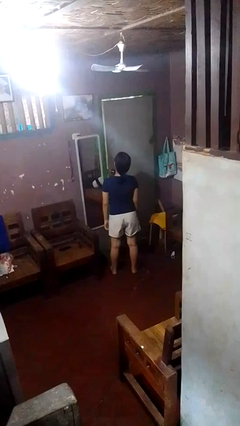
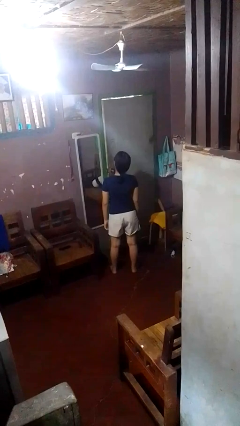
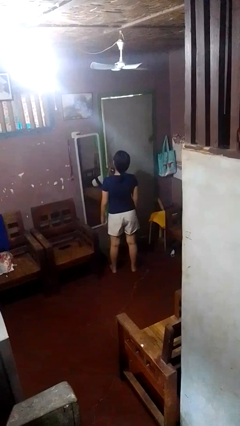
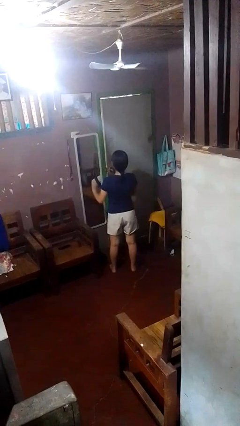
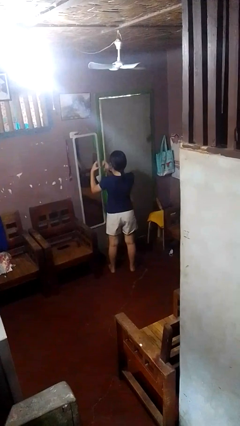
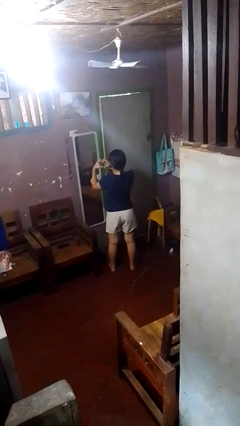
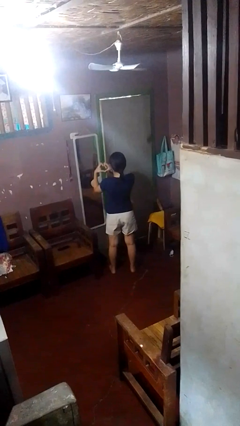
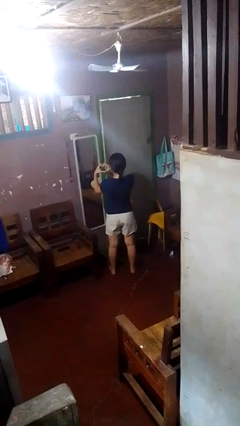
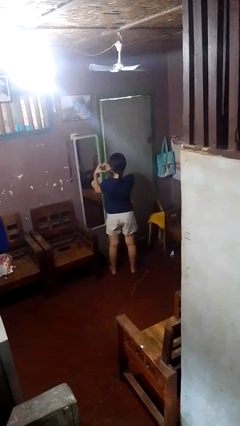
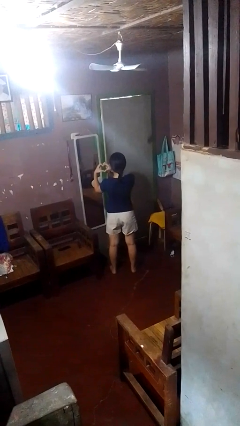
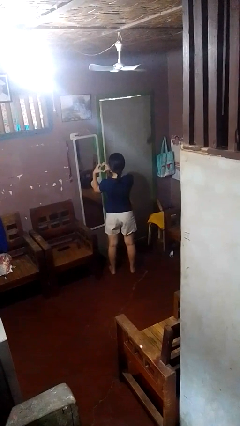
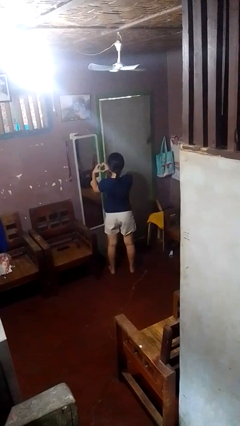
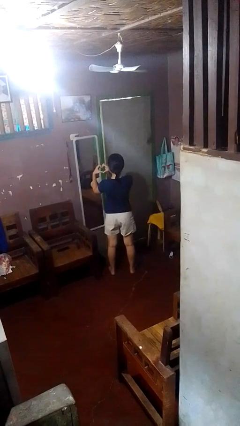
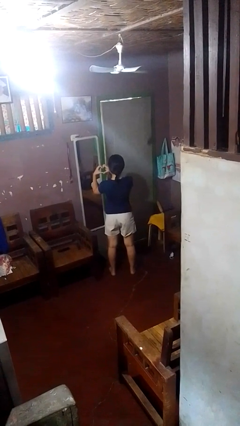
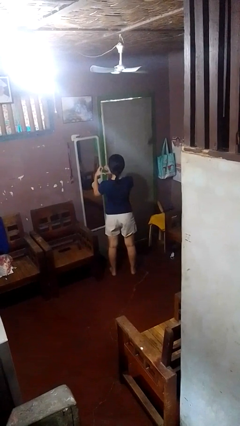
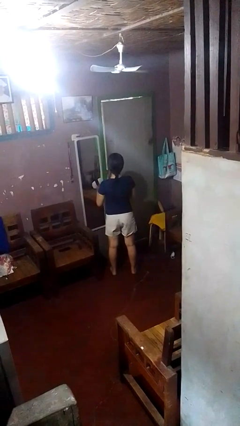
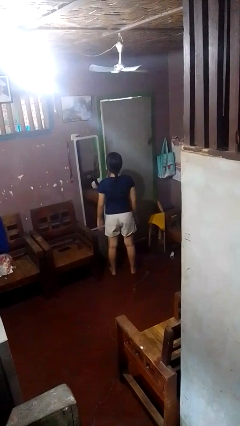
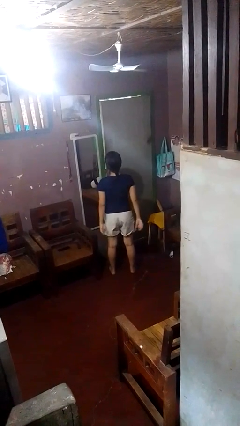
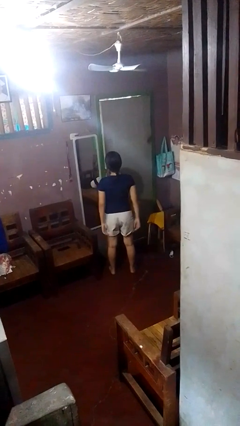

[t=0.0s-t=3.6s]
person gestures heart

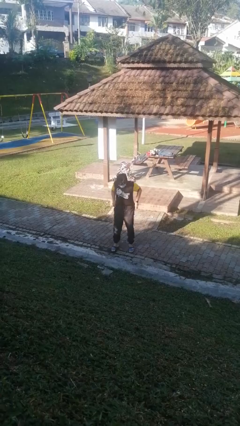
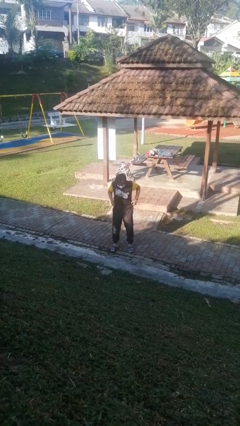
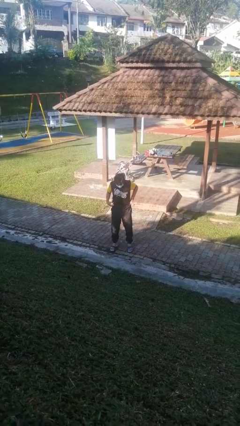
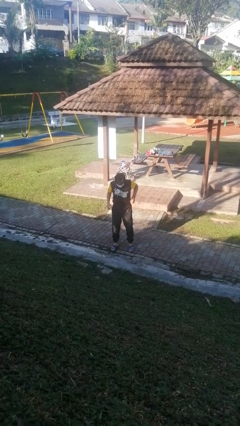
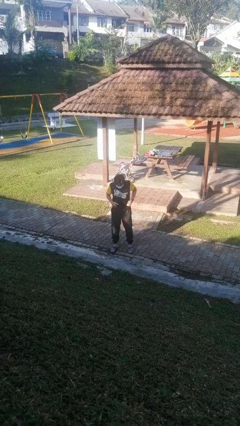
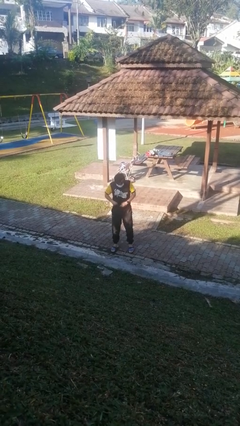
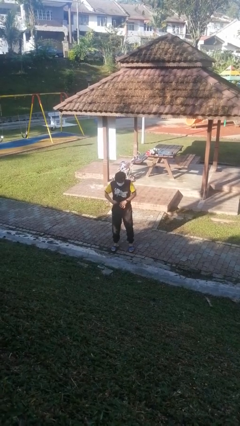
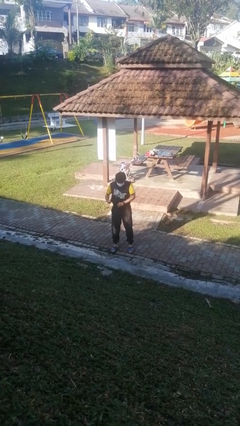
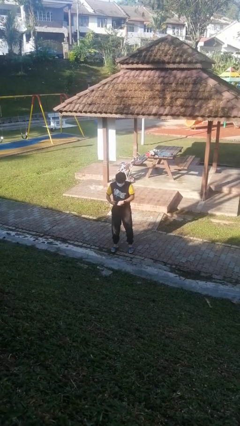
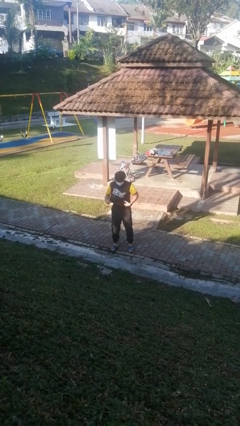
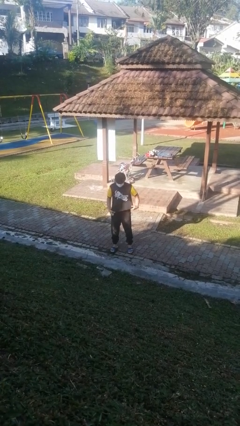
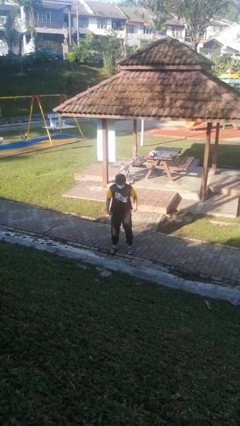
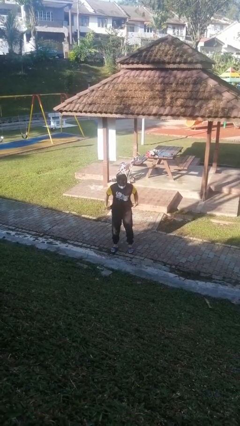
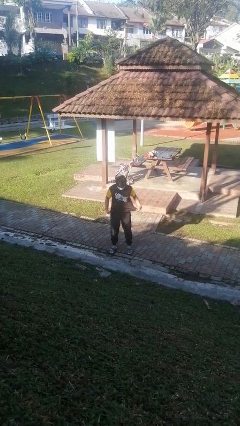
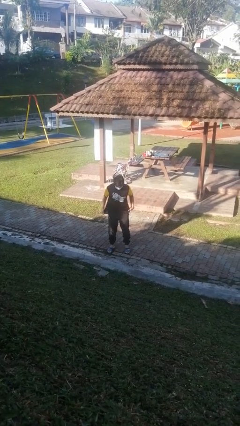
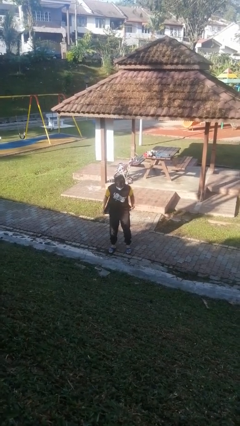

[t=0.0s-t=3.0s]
person untucks shirt

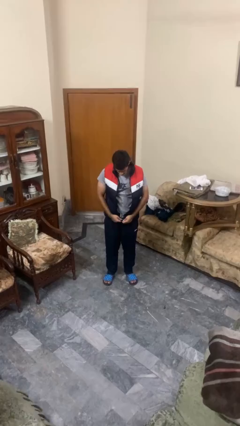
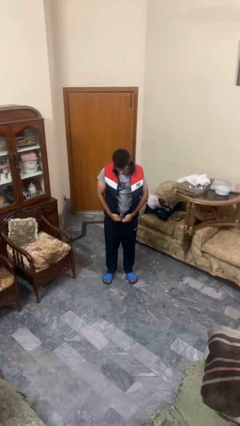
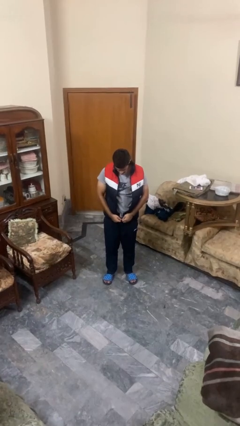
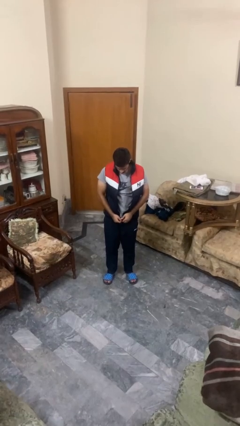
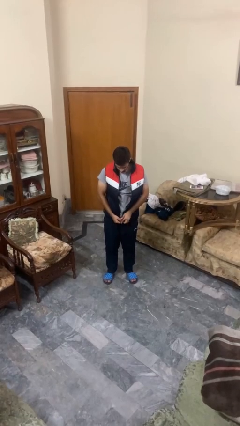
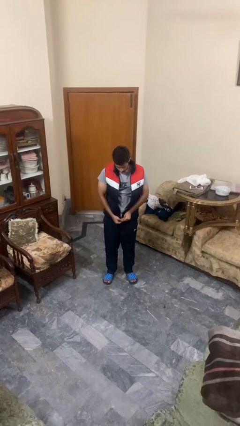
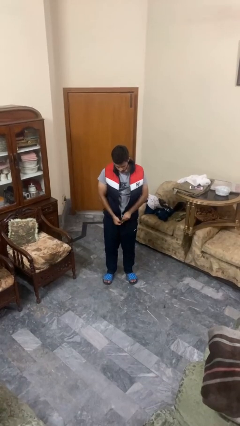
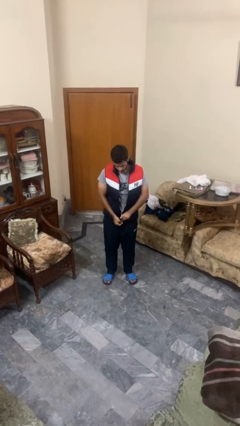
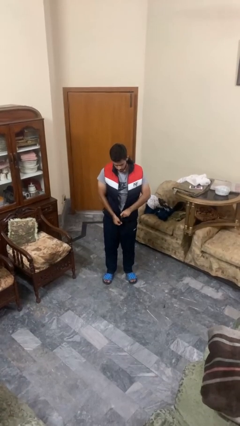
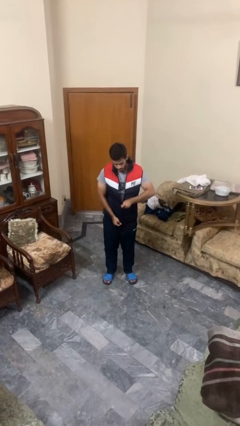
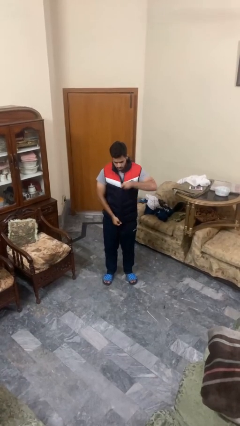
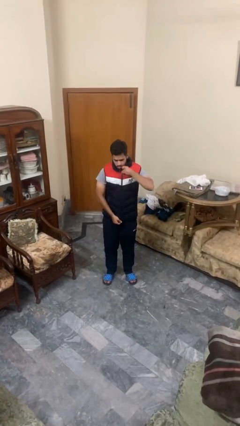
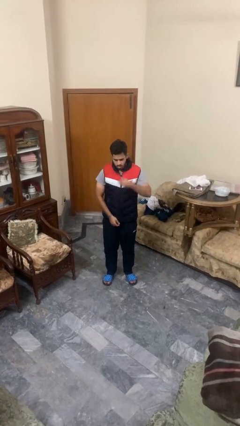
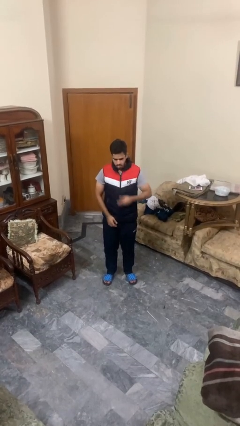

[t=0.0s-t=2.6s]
person zips up jacket

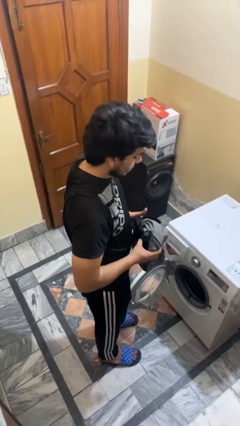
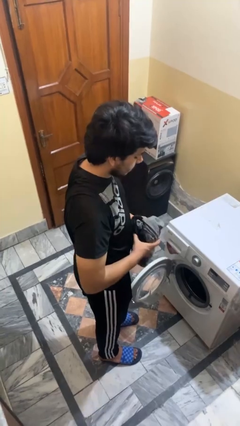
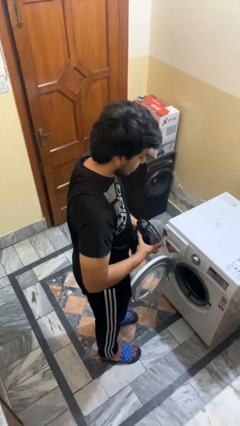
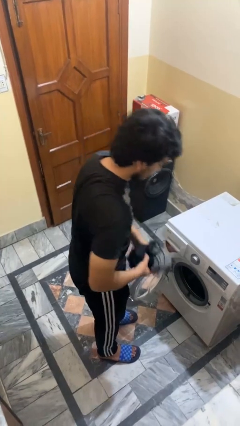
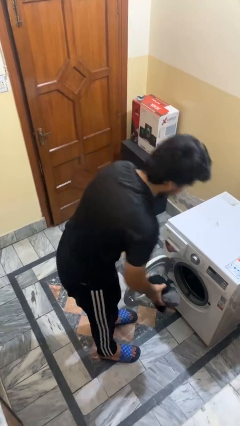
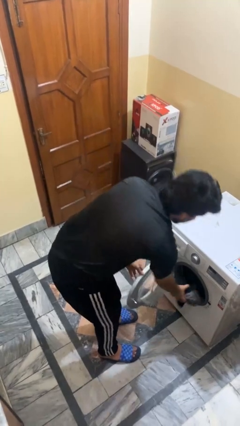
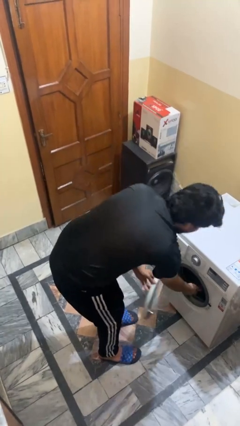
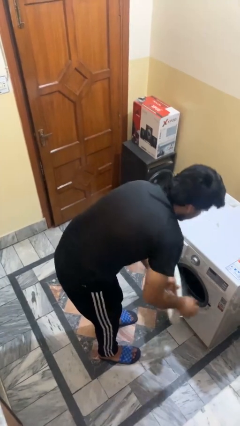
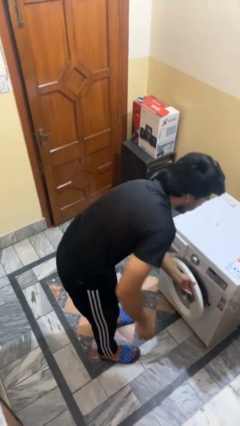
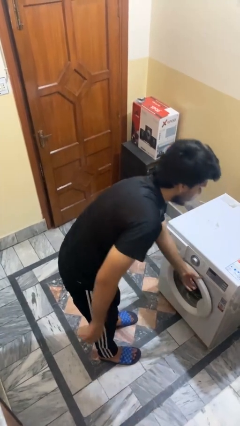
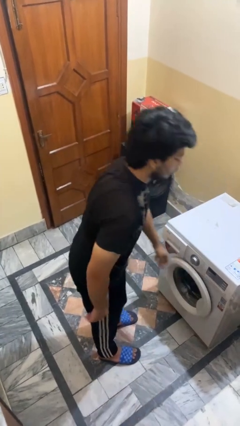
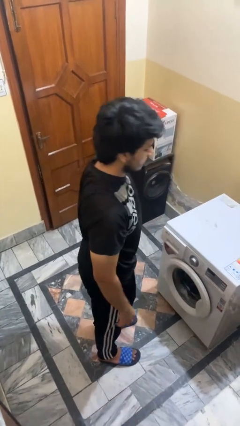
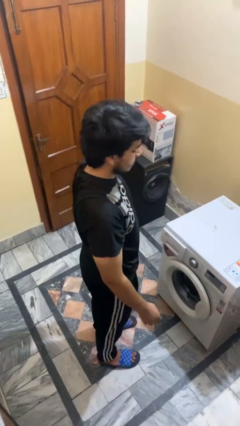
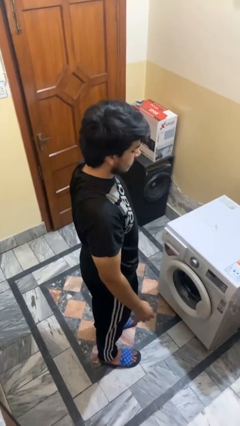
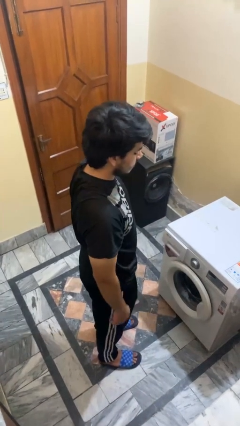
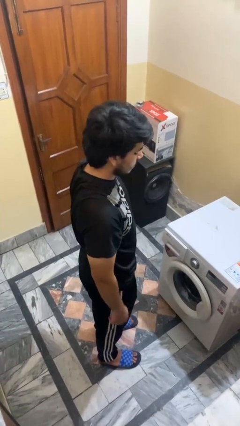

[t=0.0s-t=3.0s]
person loads clotheswasher

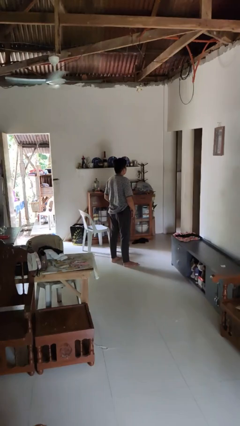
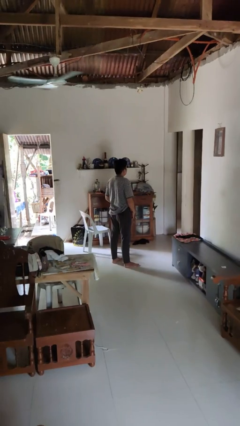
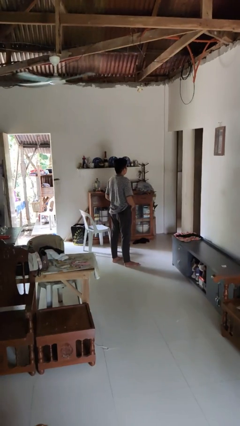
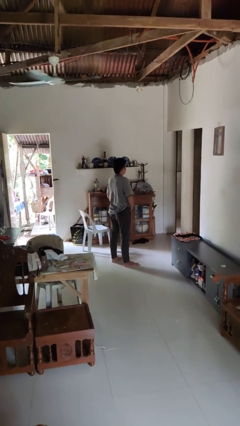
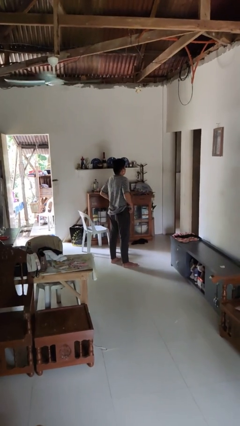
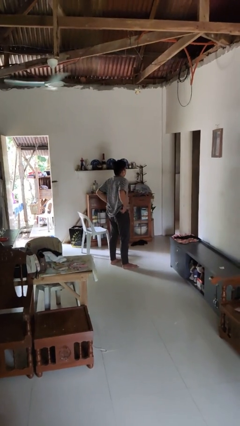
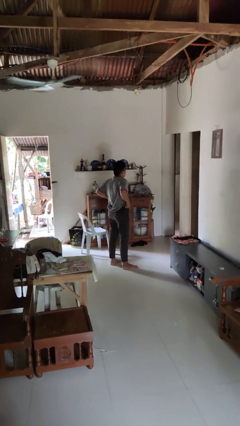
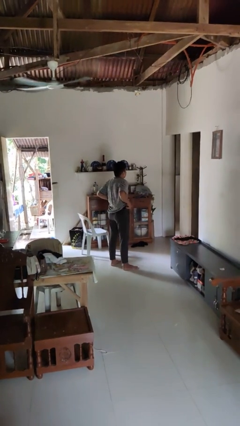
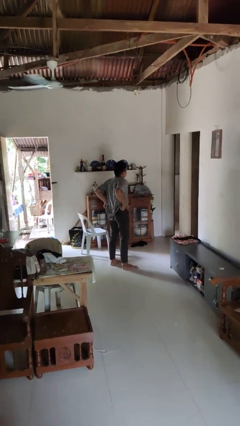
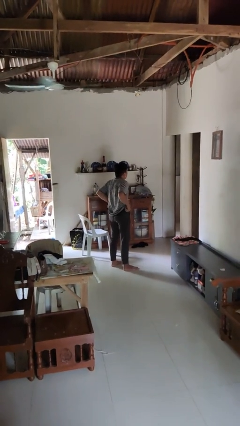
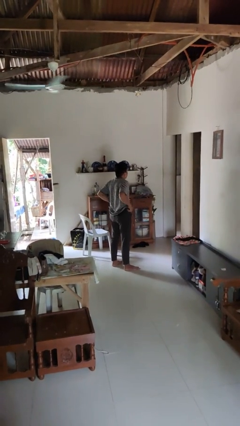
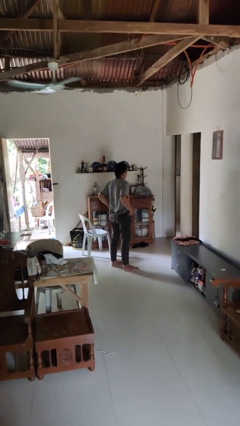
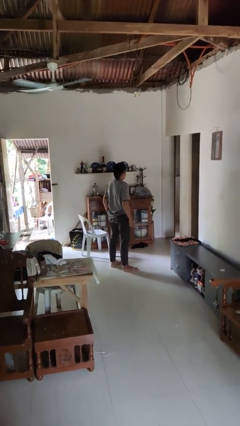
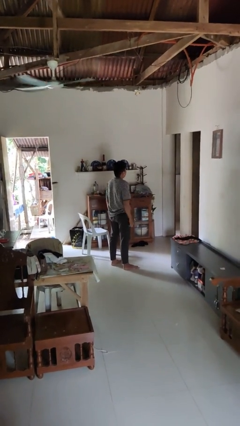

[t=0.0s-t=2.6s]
person hikes up pants

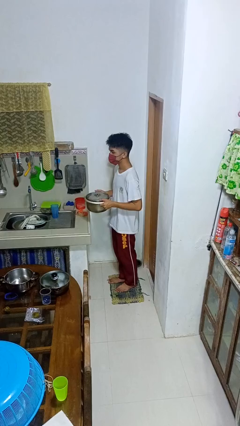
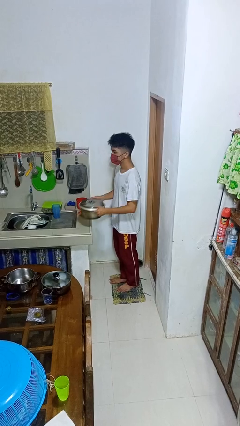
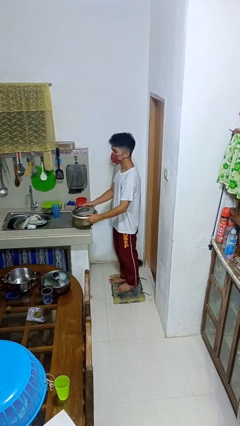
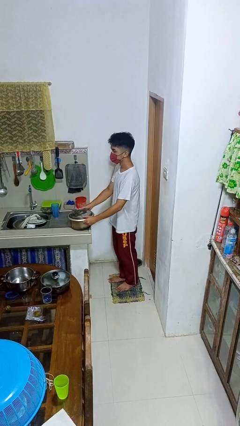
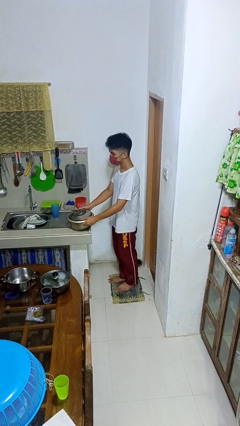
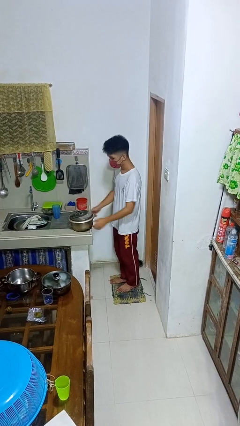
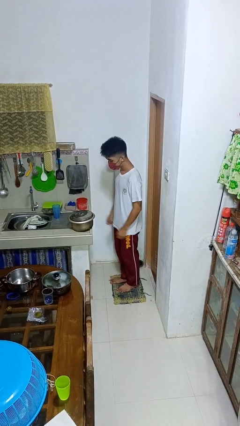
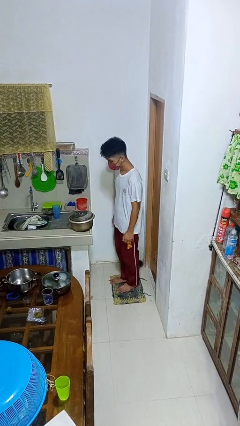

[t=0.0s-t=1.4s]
person puts down object on countertop

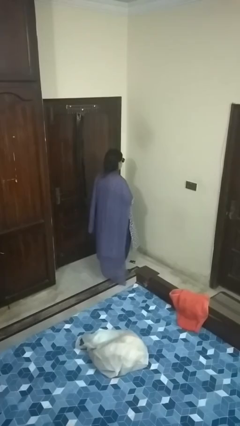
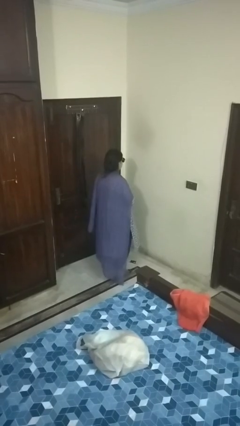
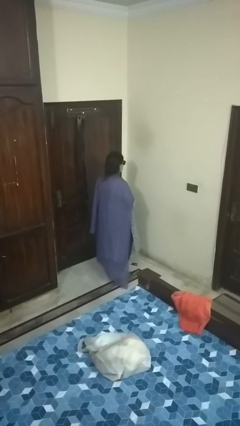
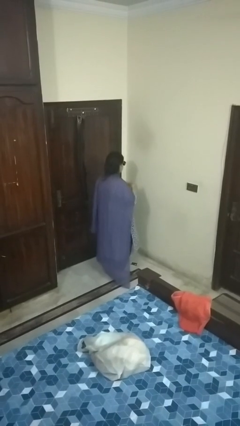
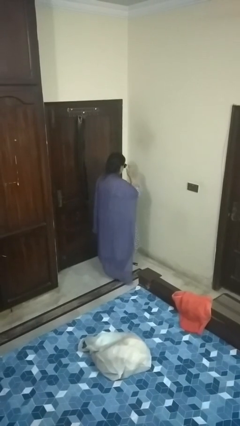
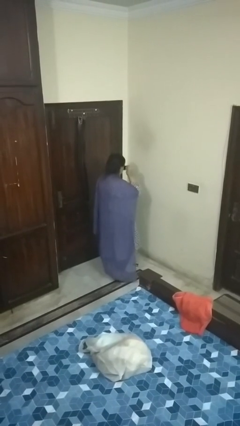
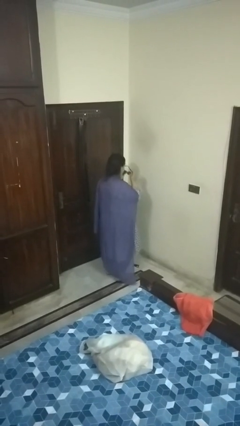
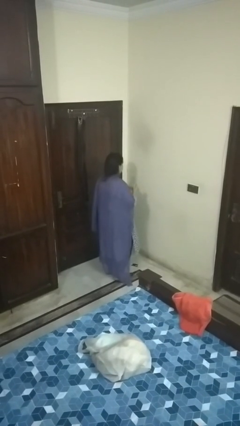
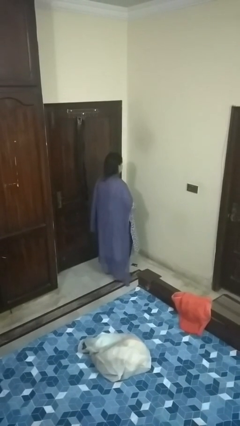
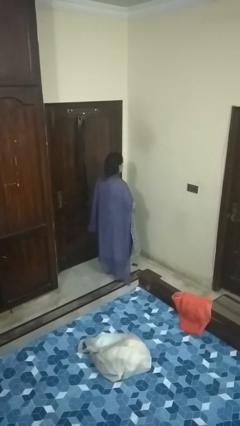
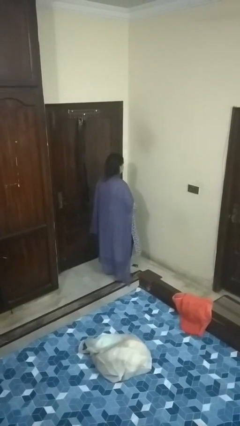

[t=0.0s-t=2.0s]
person takes off sunglasses
